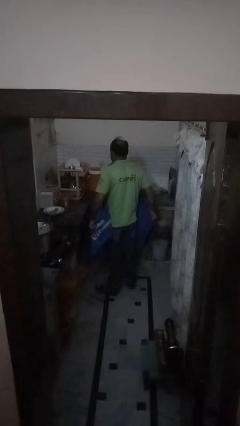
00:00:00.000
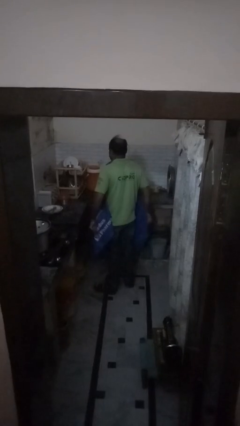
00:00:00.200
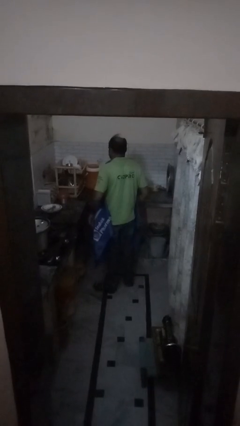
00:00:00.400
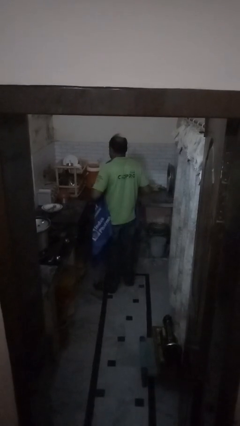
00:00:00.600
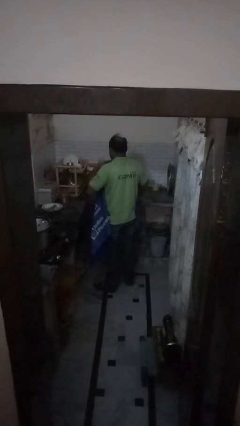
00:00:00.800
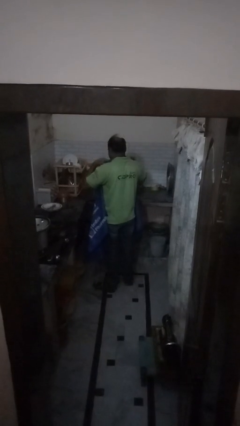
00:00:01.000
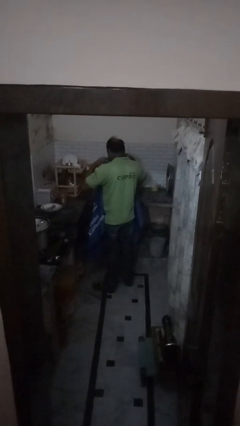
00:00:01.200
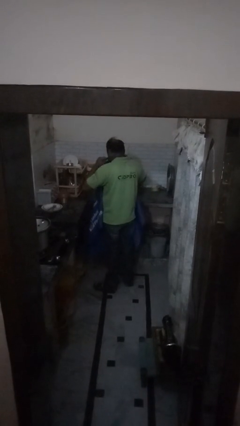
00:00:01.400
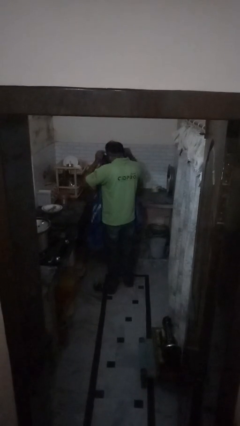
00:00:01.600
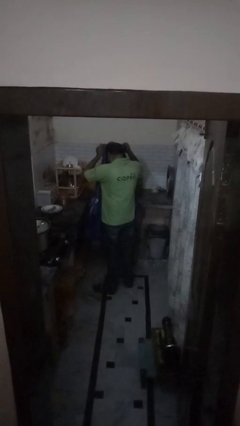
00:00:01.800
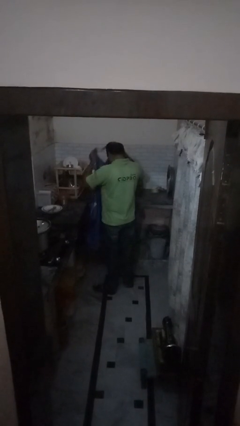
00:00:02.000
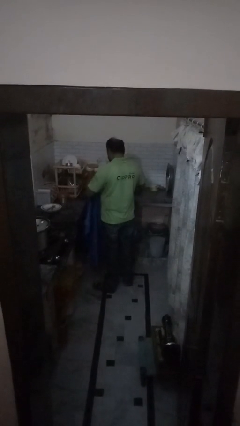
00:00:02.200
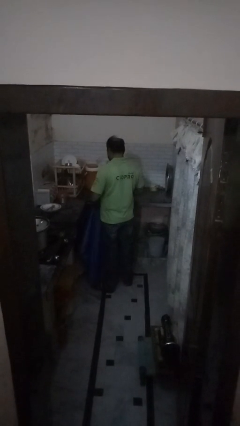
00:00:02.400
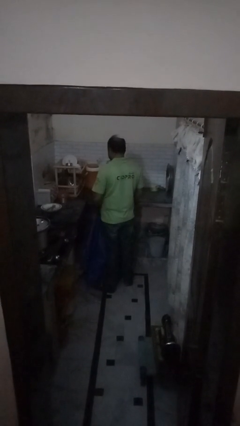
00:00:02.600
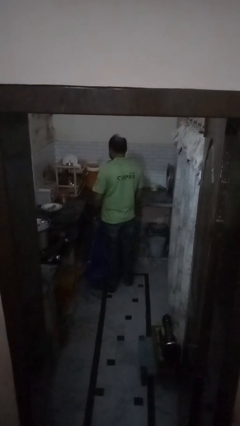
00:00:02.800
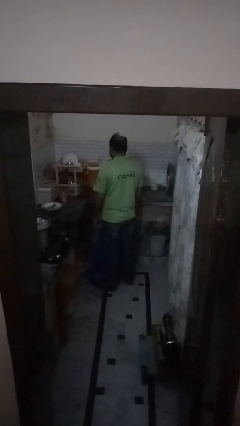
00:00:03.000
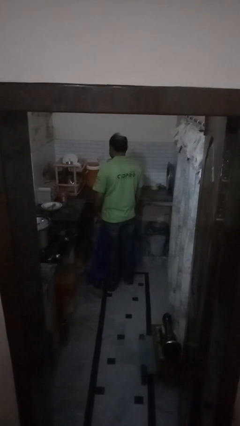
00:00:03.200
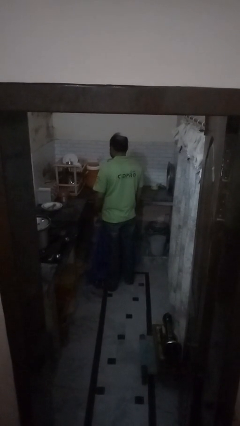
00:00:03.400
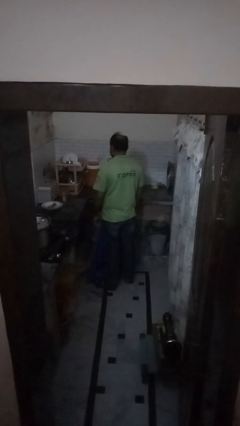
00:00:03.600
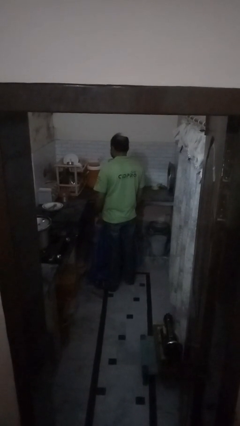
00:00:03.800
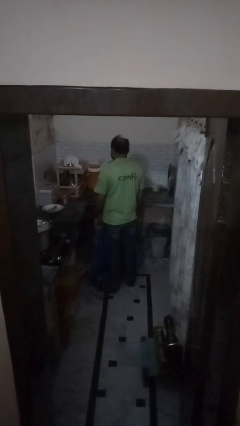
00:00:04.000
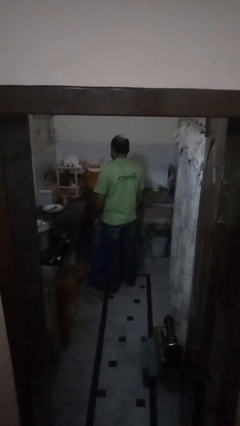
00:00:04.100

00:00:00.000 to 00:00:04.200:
person takes off apron

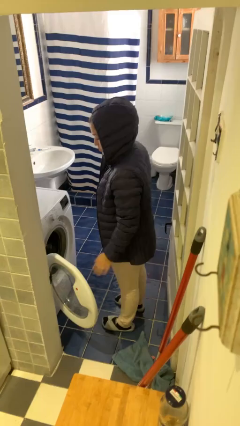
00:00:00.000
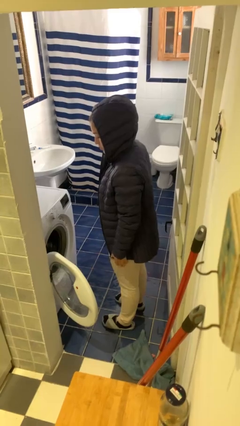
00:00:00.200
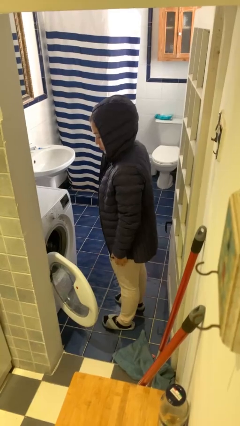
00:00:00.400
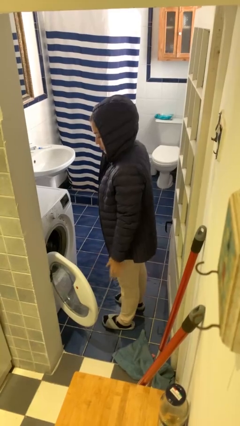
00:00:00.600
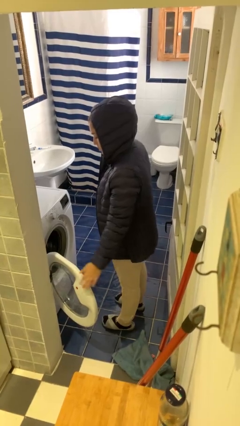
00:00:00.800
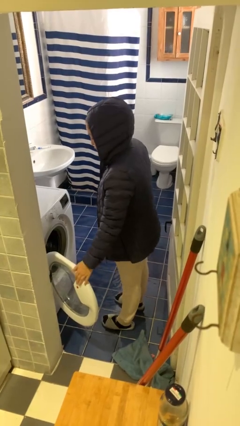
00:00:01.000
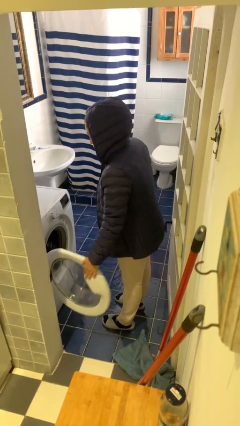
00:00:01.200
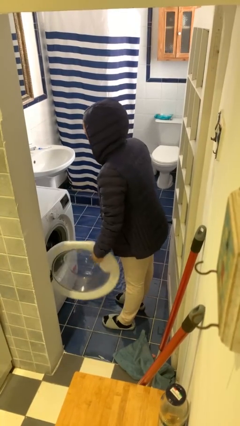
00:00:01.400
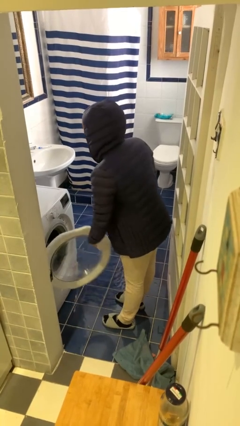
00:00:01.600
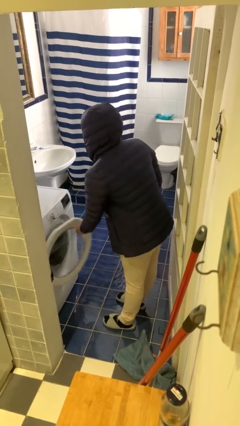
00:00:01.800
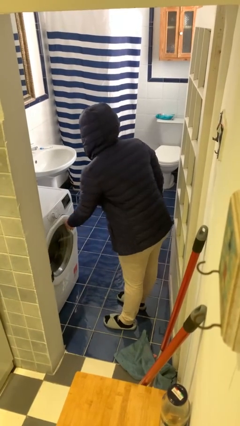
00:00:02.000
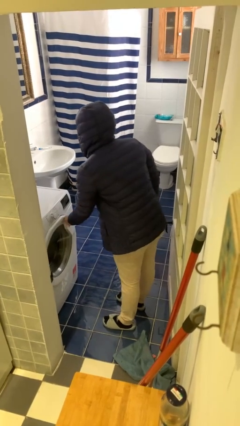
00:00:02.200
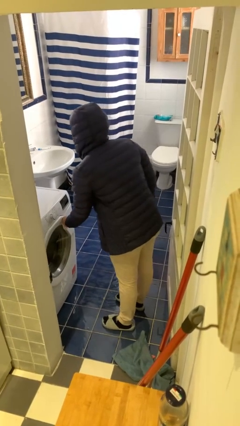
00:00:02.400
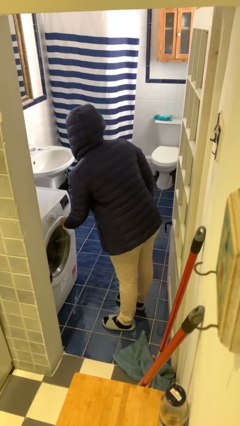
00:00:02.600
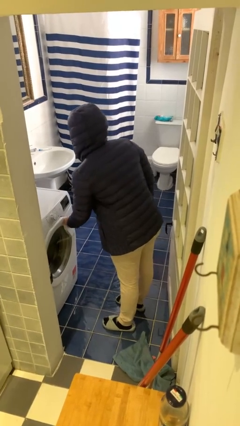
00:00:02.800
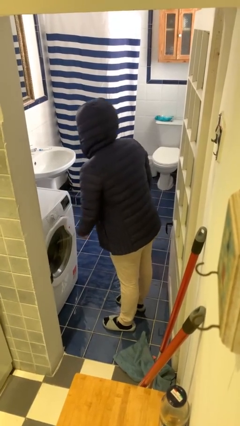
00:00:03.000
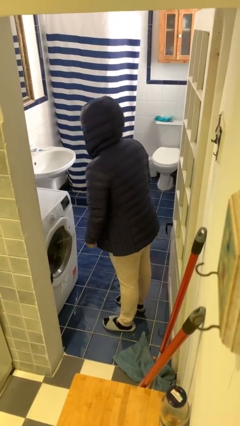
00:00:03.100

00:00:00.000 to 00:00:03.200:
person closes clothes washer

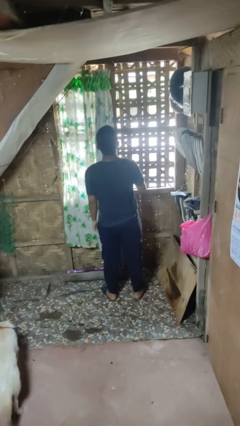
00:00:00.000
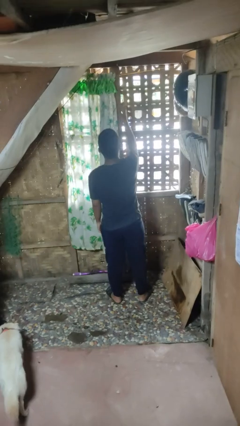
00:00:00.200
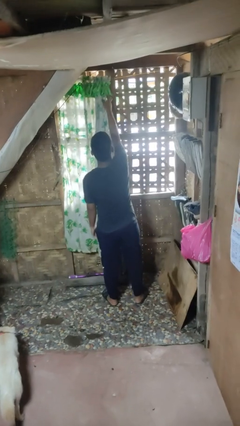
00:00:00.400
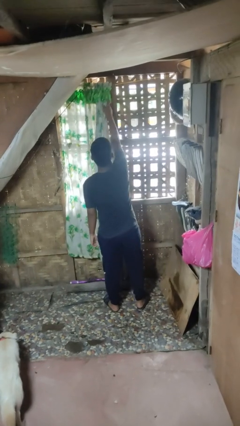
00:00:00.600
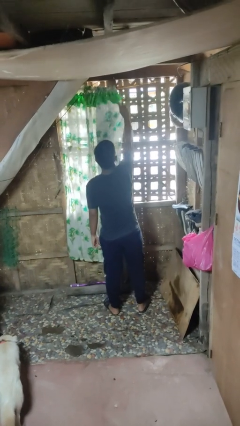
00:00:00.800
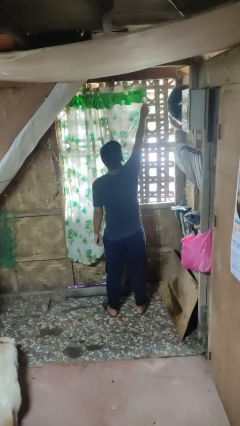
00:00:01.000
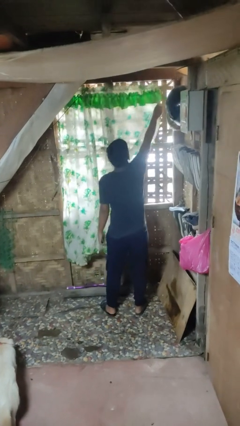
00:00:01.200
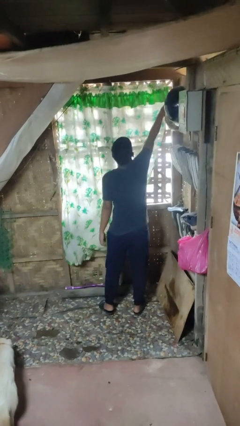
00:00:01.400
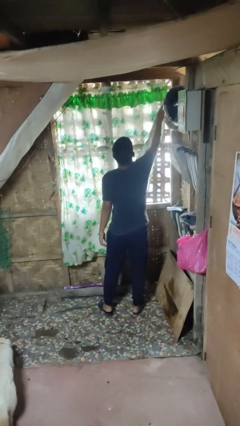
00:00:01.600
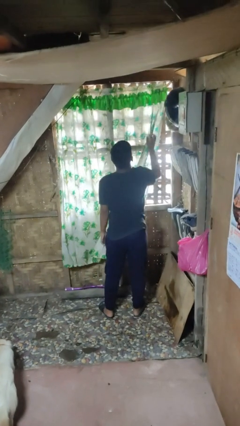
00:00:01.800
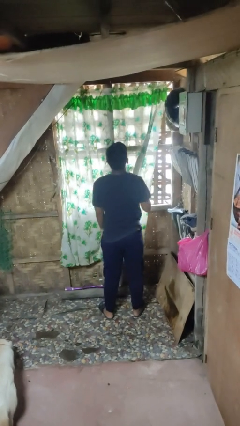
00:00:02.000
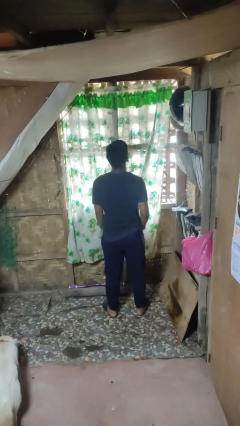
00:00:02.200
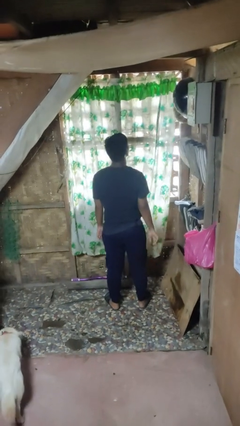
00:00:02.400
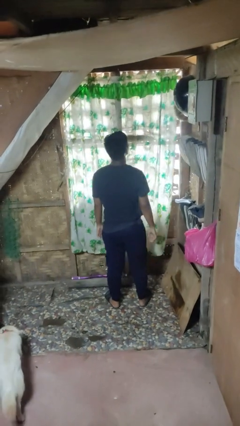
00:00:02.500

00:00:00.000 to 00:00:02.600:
person closes curtains

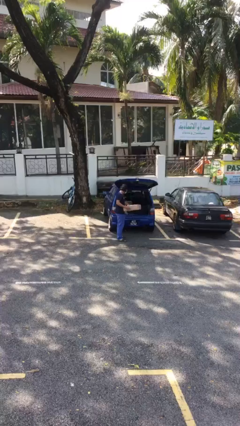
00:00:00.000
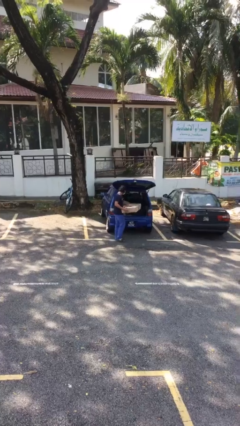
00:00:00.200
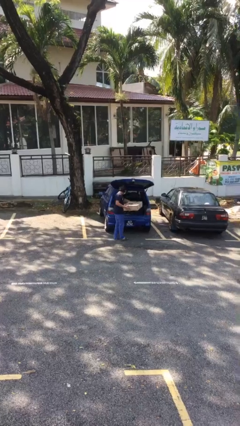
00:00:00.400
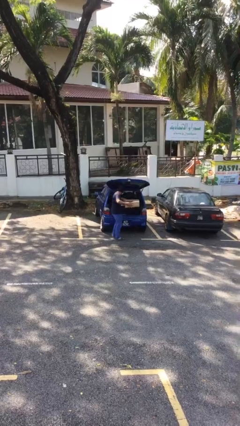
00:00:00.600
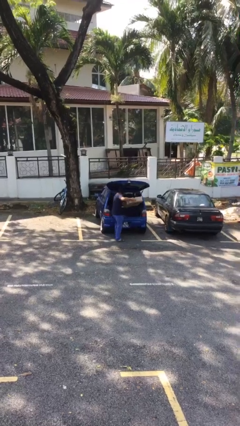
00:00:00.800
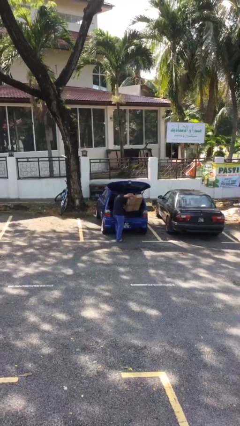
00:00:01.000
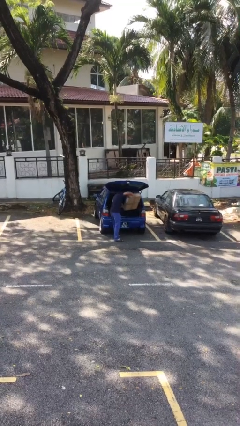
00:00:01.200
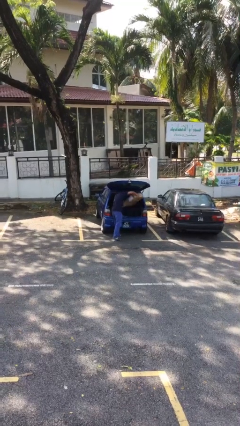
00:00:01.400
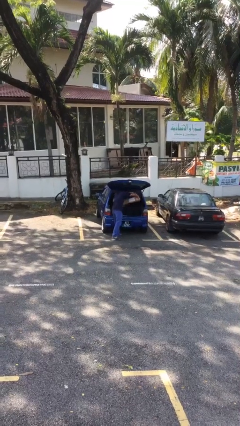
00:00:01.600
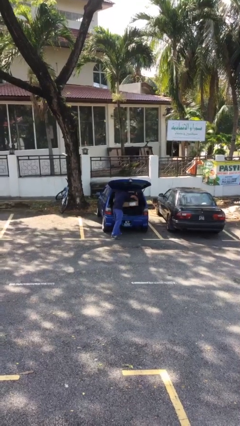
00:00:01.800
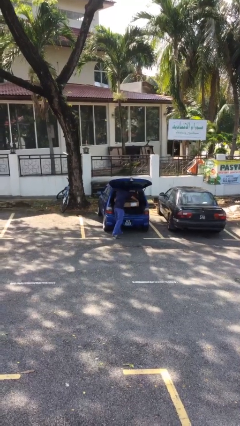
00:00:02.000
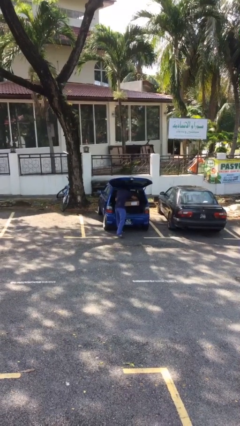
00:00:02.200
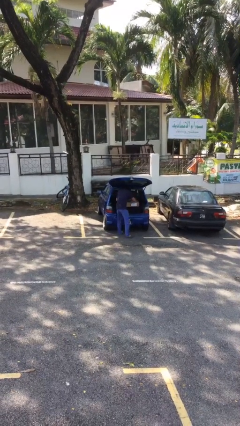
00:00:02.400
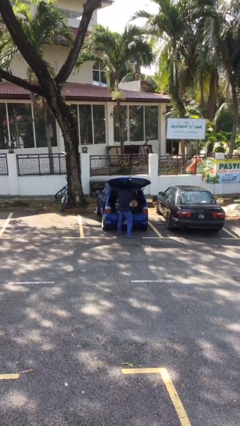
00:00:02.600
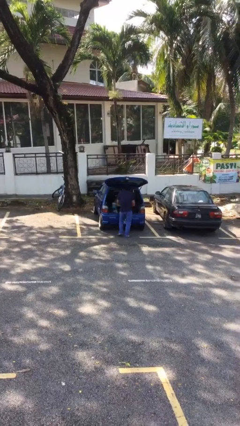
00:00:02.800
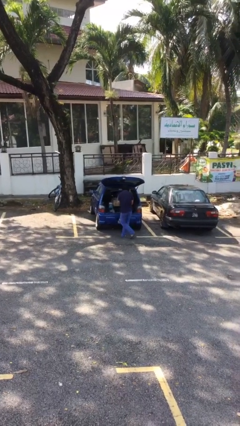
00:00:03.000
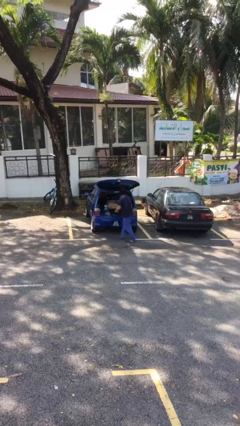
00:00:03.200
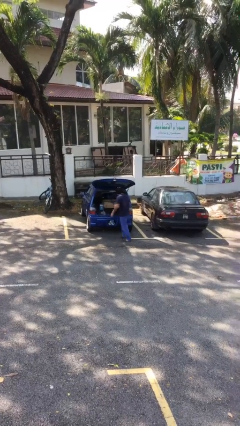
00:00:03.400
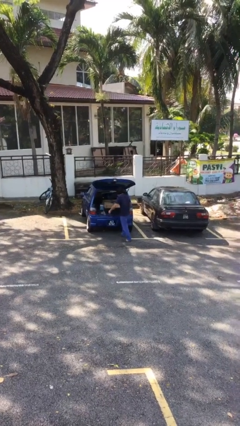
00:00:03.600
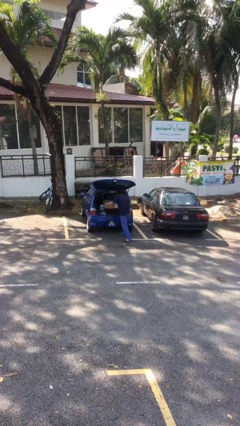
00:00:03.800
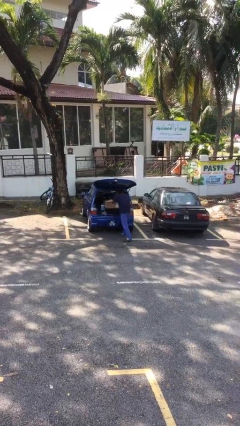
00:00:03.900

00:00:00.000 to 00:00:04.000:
person loads car

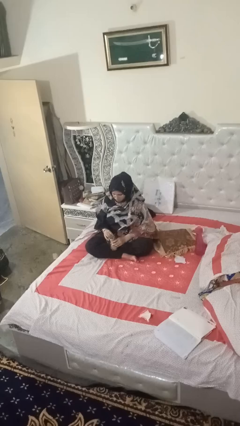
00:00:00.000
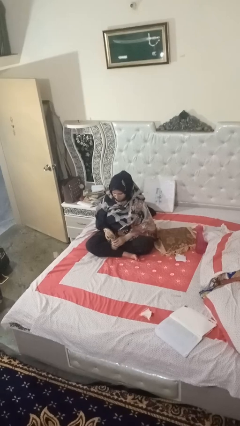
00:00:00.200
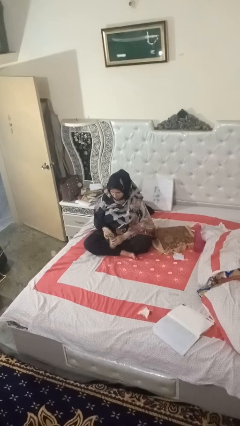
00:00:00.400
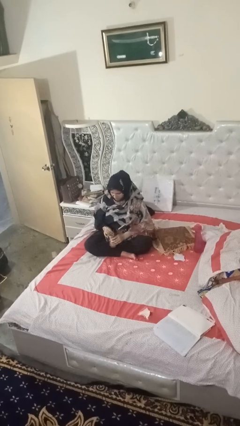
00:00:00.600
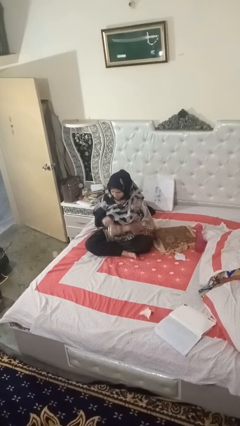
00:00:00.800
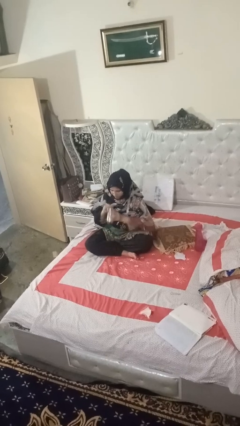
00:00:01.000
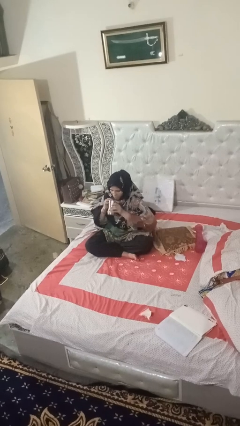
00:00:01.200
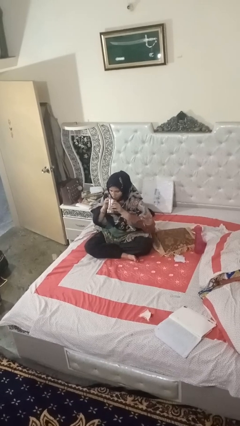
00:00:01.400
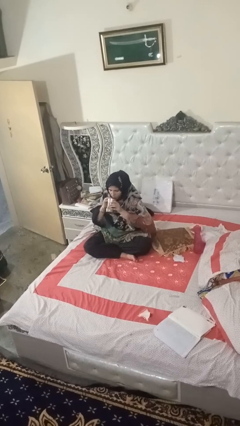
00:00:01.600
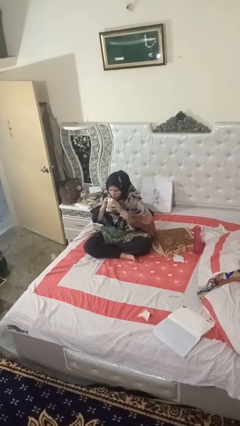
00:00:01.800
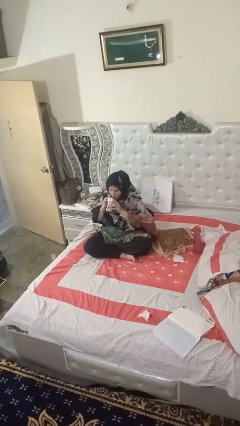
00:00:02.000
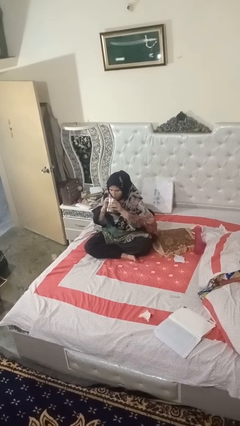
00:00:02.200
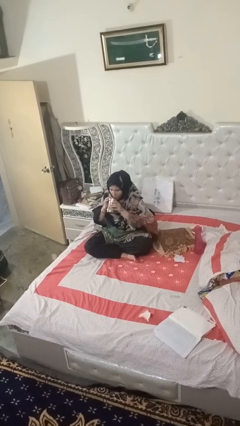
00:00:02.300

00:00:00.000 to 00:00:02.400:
person drinks from straw

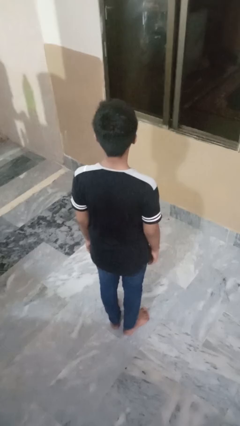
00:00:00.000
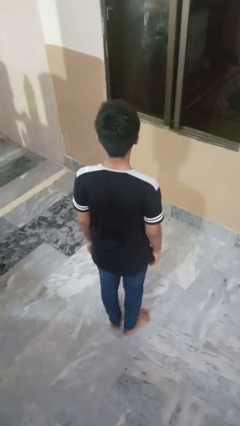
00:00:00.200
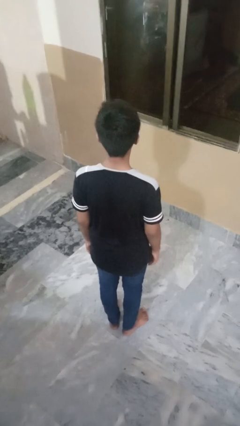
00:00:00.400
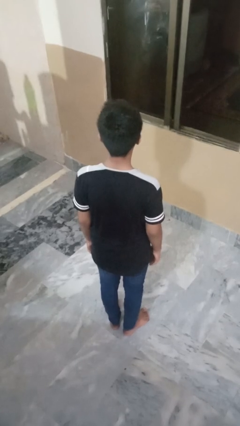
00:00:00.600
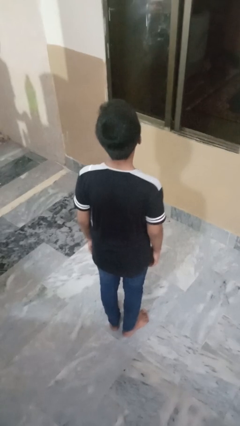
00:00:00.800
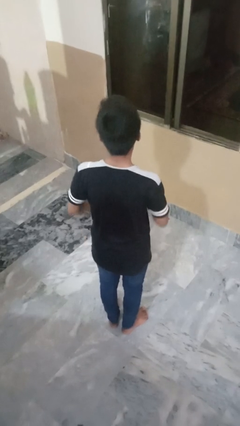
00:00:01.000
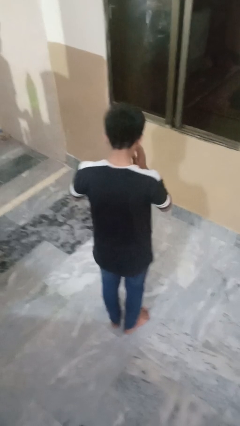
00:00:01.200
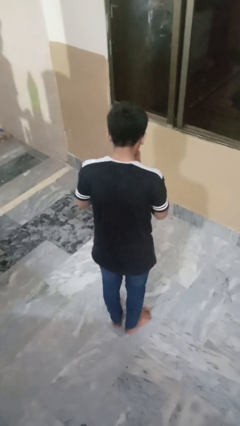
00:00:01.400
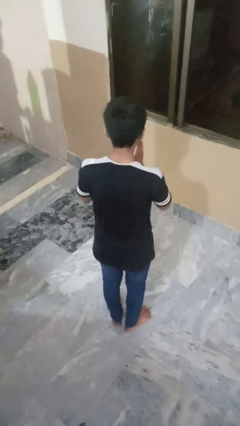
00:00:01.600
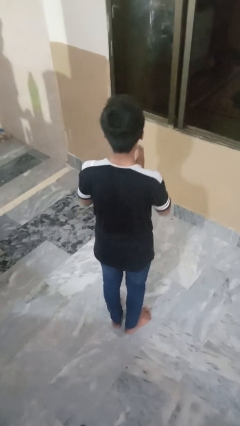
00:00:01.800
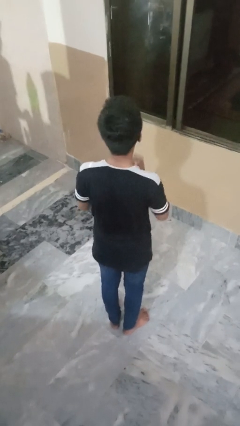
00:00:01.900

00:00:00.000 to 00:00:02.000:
person sneezes into hand
